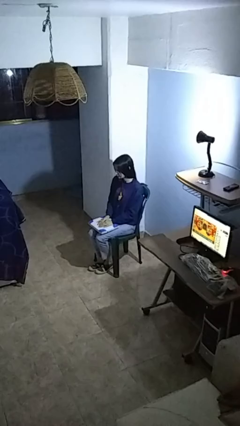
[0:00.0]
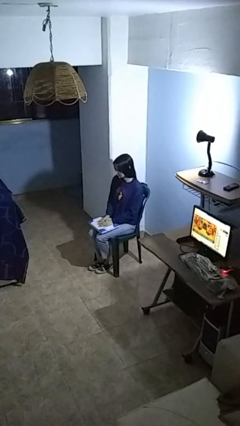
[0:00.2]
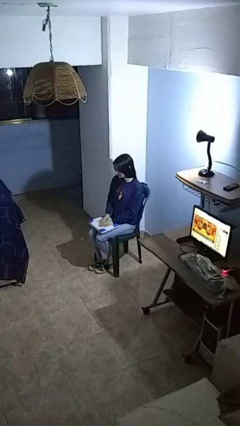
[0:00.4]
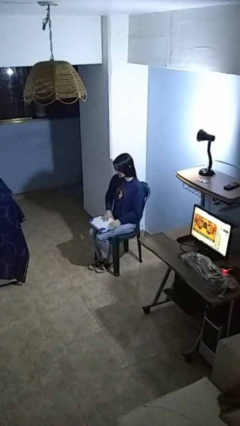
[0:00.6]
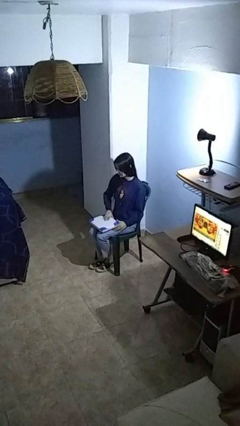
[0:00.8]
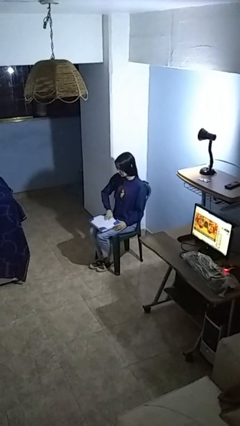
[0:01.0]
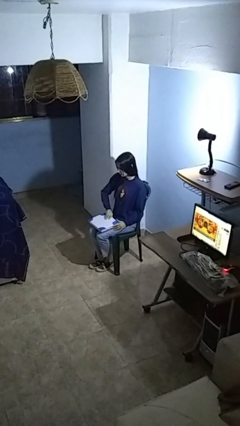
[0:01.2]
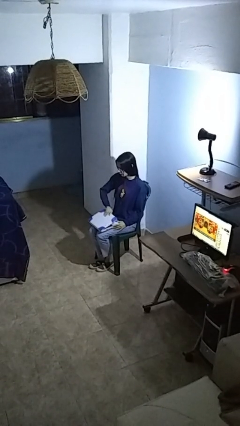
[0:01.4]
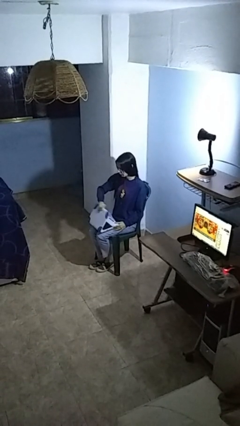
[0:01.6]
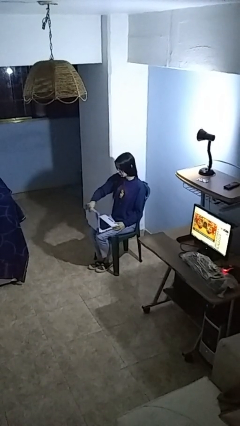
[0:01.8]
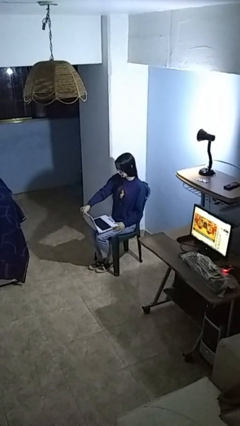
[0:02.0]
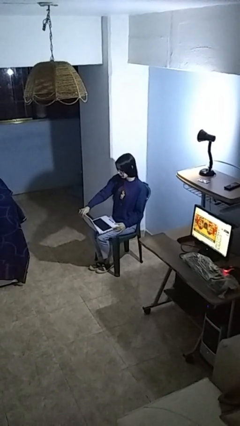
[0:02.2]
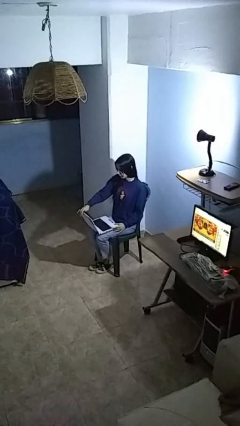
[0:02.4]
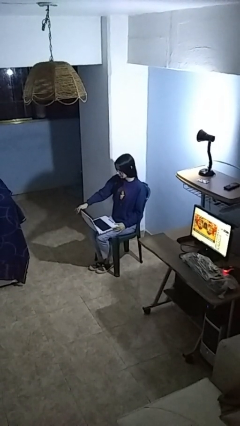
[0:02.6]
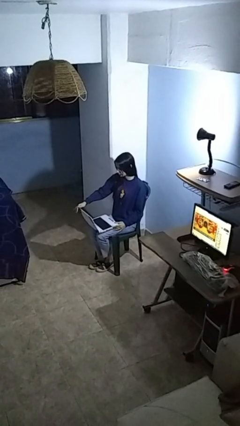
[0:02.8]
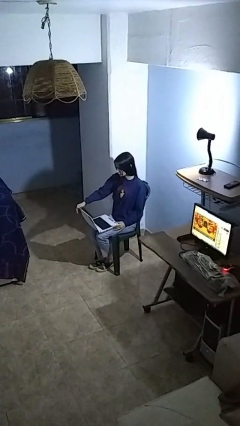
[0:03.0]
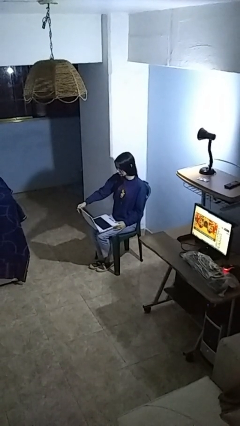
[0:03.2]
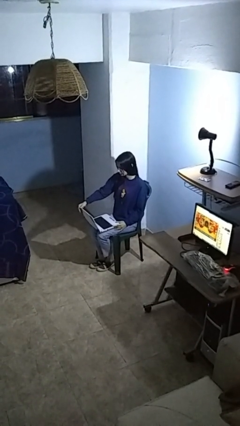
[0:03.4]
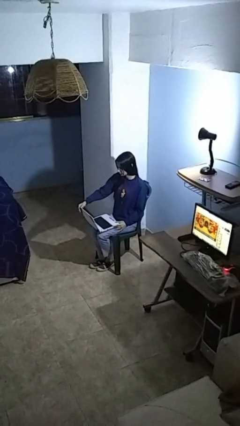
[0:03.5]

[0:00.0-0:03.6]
person opens laptop

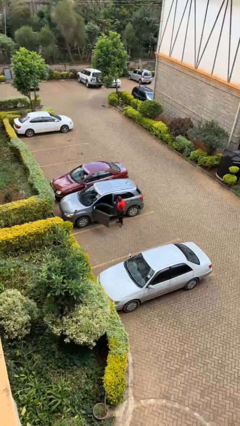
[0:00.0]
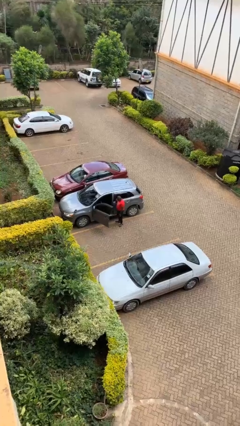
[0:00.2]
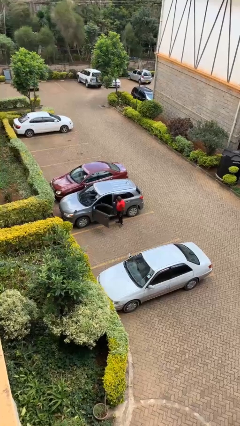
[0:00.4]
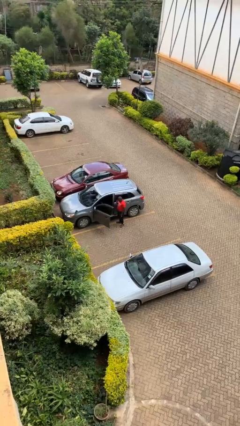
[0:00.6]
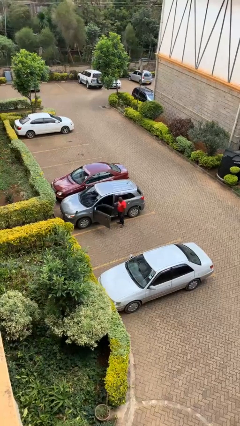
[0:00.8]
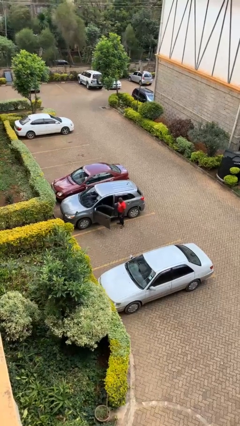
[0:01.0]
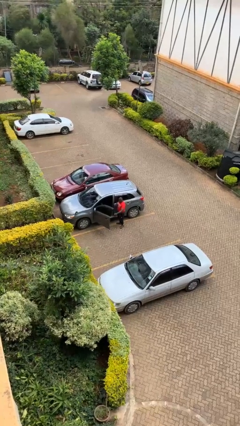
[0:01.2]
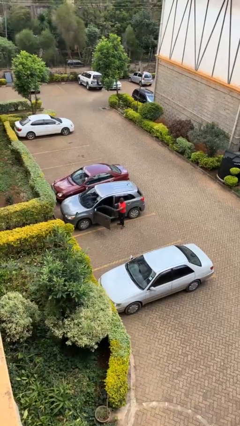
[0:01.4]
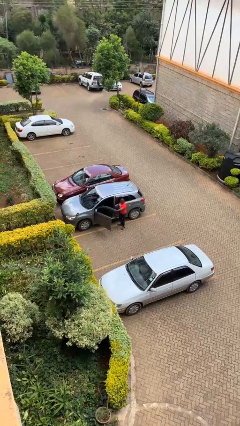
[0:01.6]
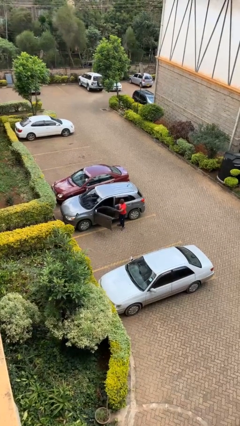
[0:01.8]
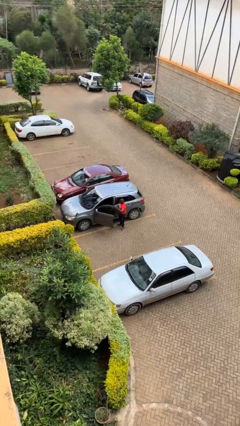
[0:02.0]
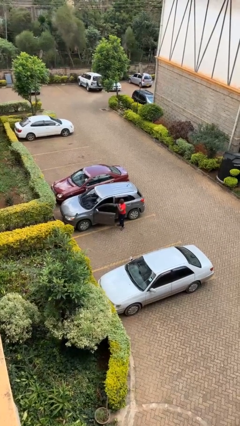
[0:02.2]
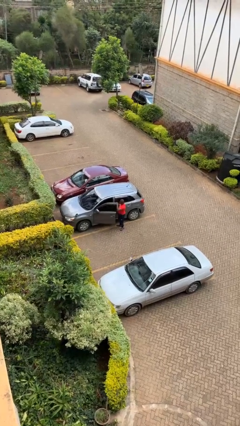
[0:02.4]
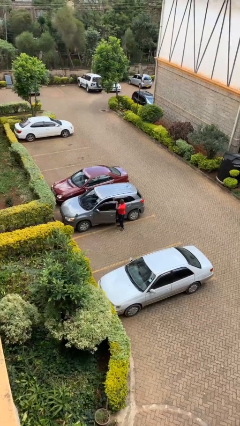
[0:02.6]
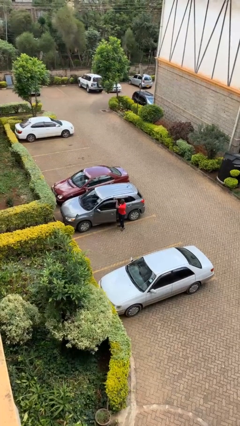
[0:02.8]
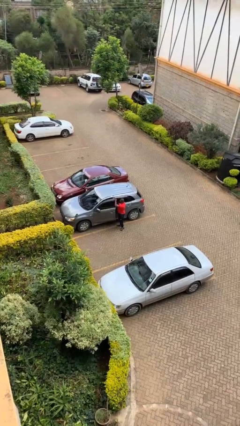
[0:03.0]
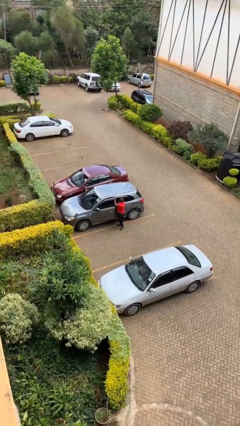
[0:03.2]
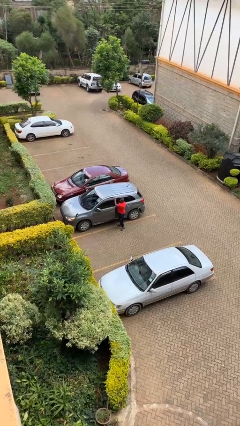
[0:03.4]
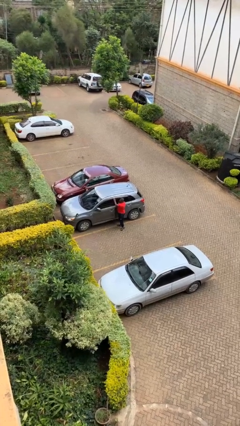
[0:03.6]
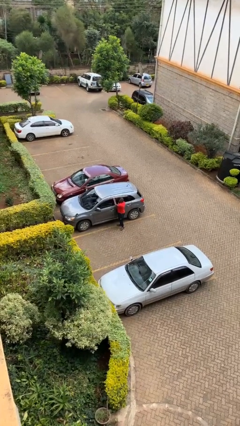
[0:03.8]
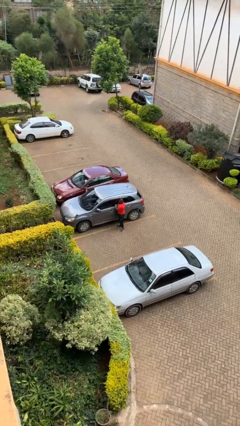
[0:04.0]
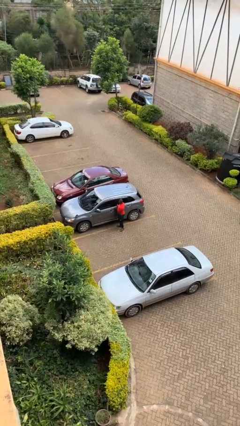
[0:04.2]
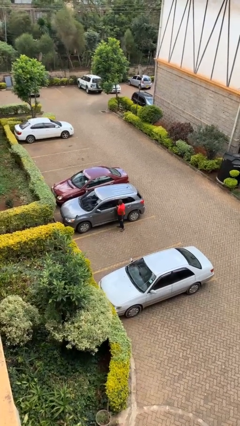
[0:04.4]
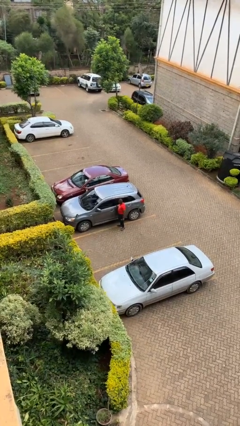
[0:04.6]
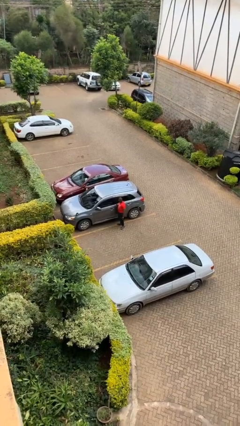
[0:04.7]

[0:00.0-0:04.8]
person closes car door

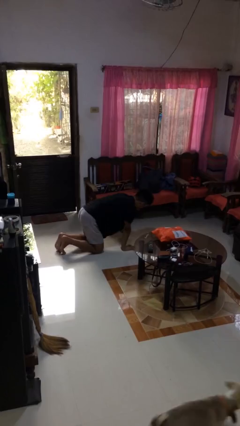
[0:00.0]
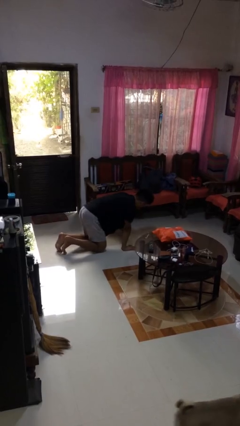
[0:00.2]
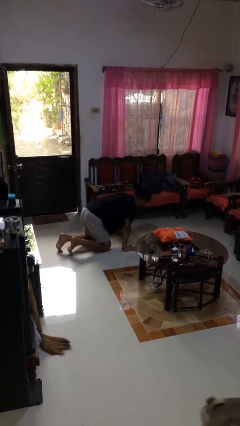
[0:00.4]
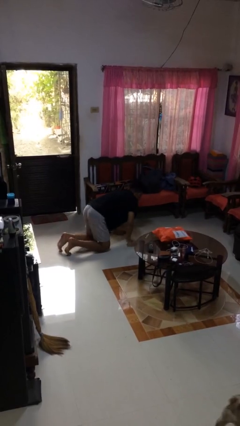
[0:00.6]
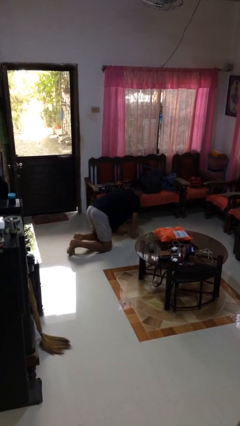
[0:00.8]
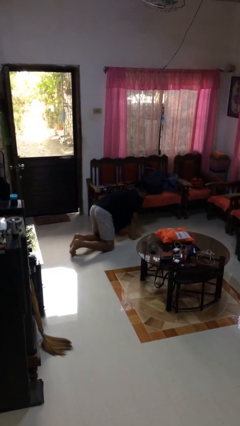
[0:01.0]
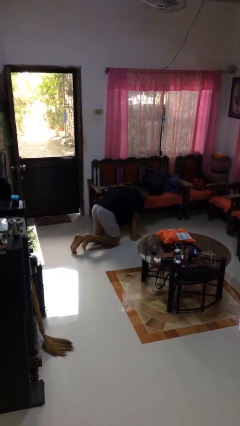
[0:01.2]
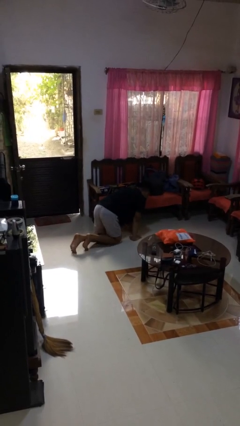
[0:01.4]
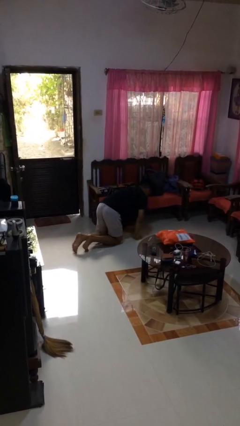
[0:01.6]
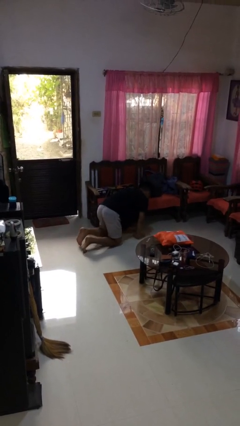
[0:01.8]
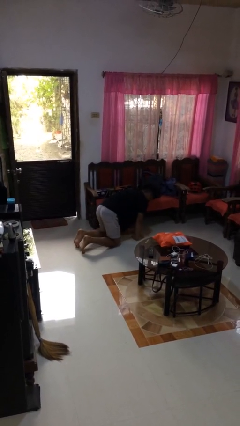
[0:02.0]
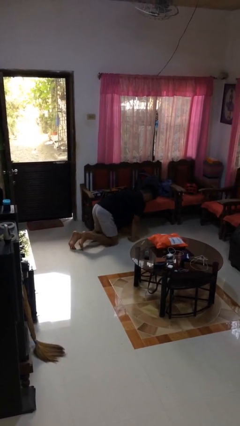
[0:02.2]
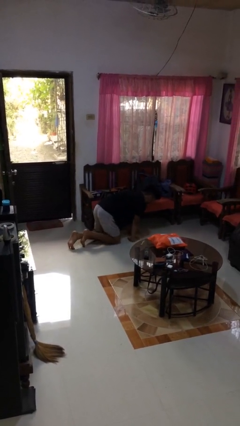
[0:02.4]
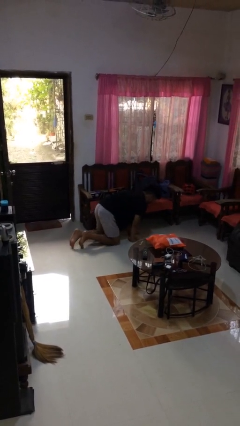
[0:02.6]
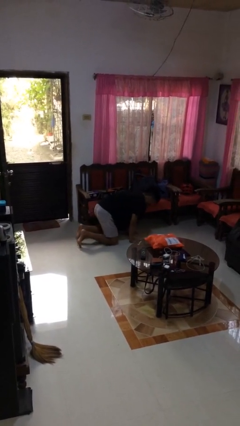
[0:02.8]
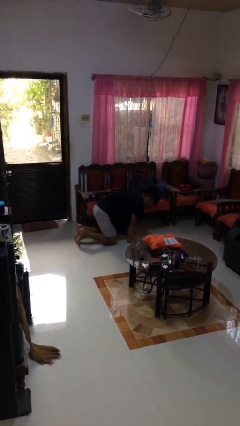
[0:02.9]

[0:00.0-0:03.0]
person crawls

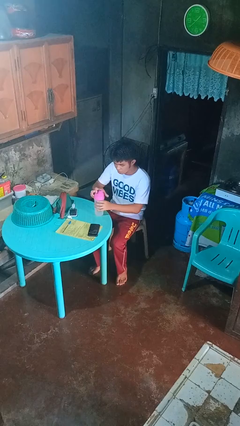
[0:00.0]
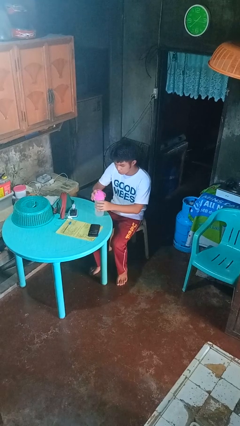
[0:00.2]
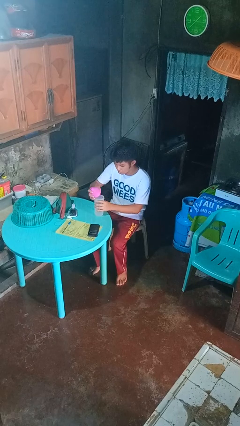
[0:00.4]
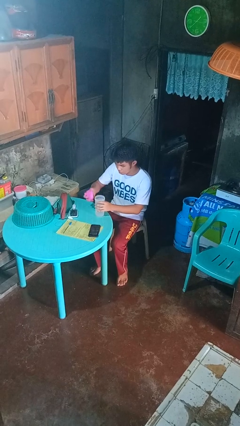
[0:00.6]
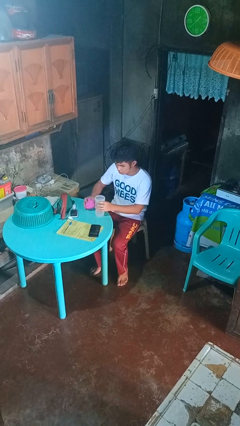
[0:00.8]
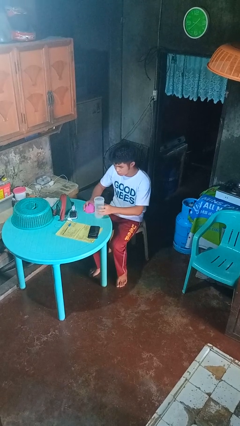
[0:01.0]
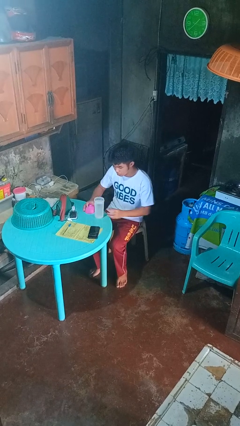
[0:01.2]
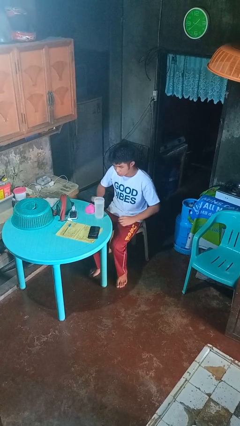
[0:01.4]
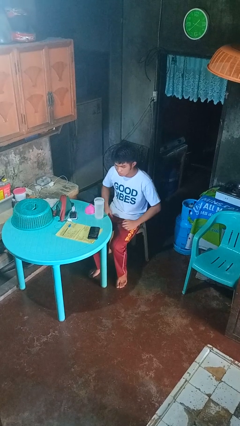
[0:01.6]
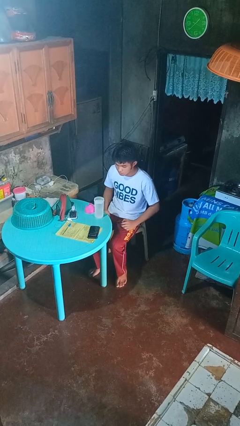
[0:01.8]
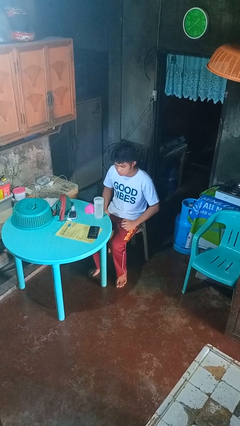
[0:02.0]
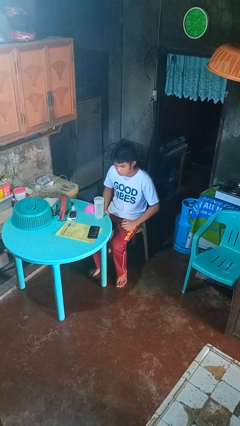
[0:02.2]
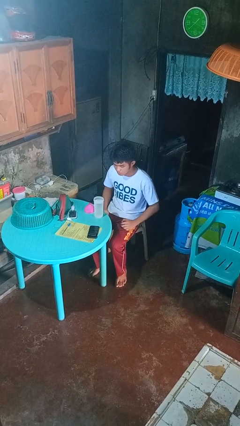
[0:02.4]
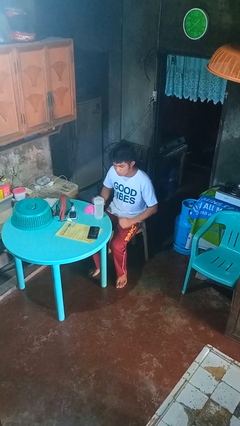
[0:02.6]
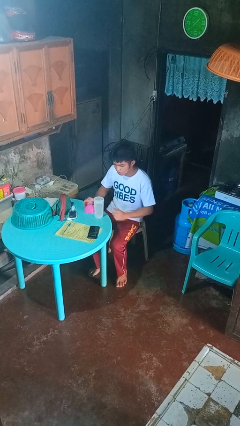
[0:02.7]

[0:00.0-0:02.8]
person unscrews lid from bottle

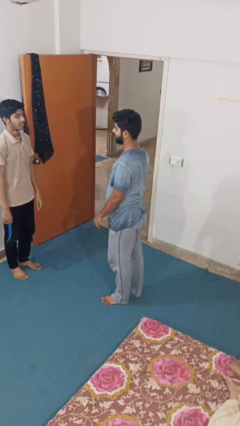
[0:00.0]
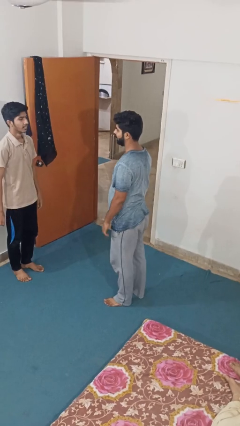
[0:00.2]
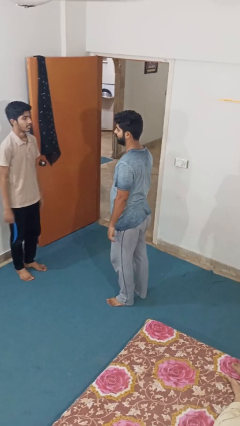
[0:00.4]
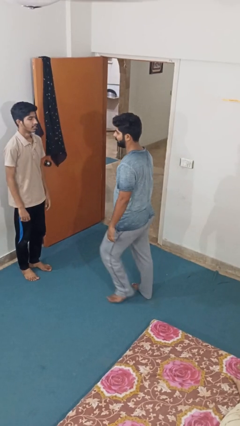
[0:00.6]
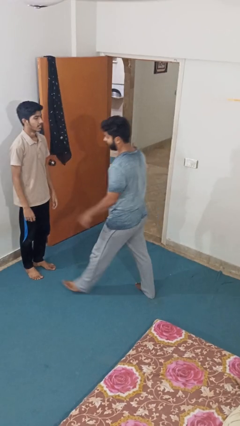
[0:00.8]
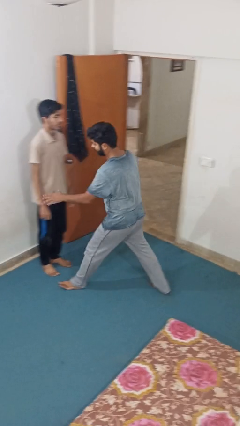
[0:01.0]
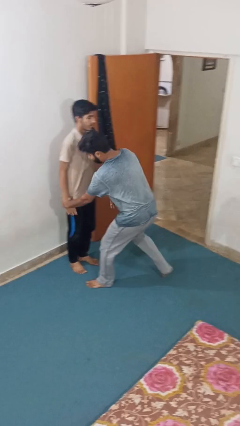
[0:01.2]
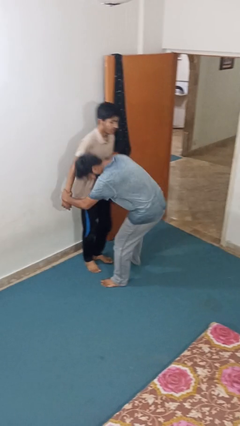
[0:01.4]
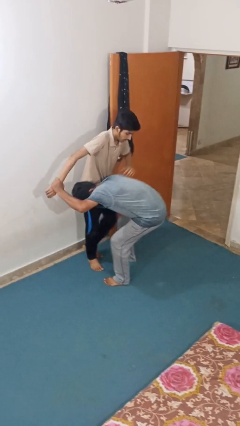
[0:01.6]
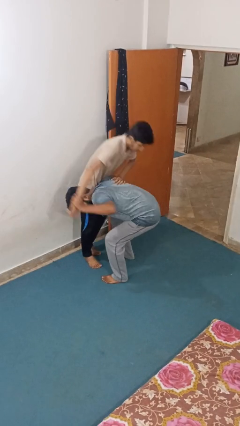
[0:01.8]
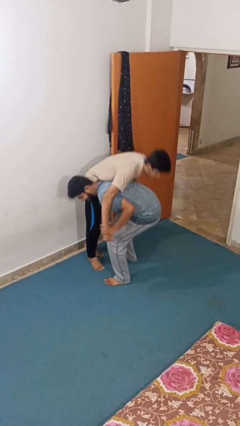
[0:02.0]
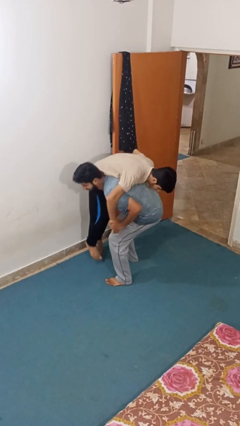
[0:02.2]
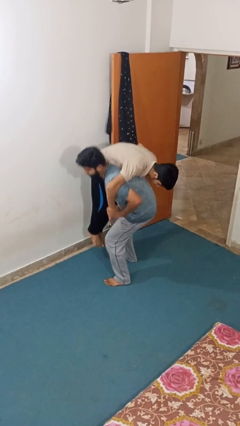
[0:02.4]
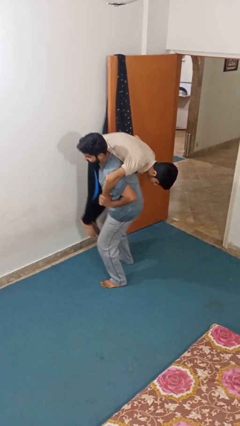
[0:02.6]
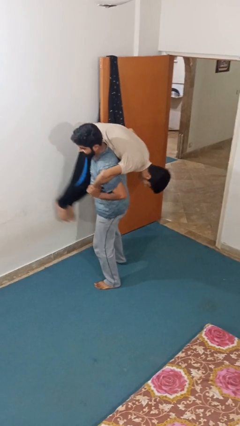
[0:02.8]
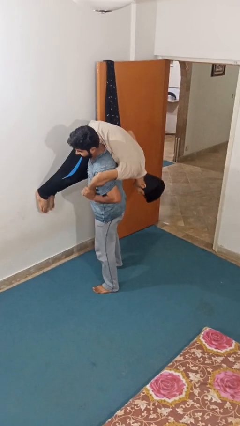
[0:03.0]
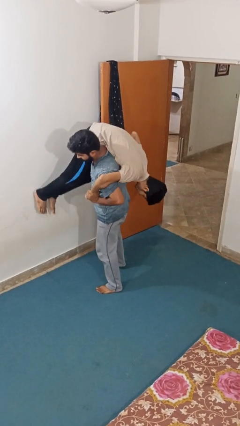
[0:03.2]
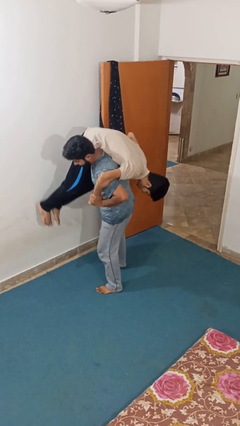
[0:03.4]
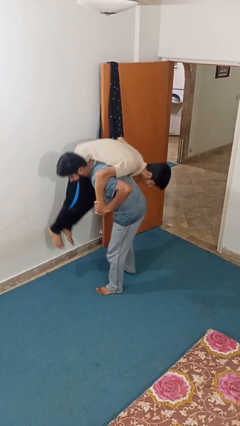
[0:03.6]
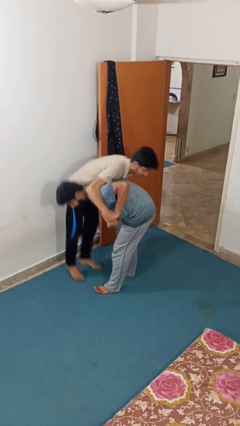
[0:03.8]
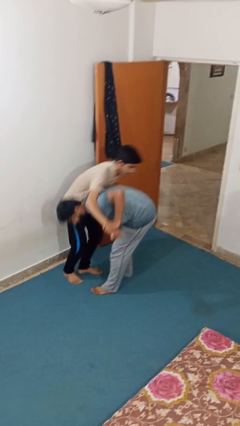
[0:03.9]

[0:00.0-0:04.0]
person carries person over shoulder
